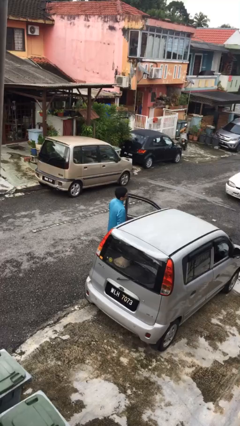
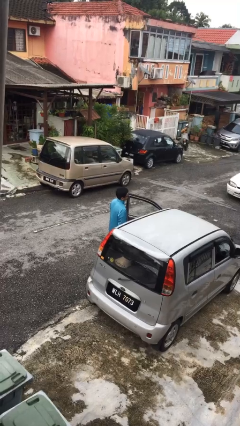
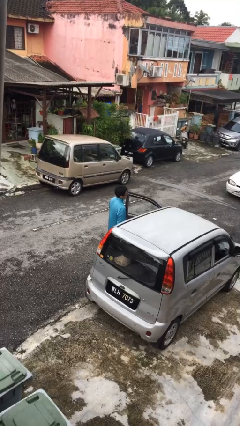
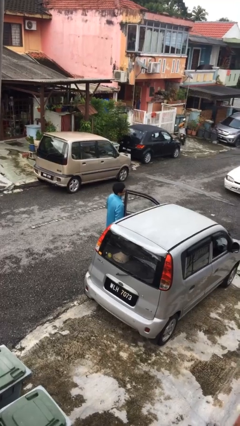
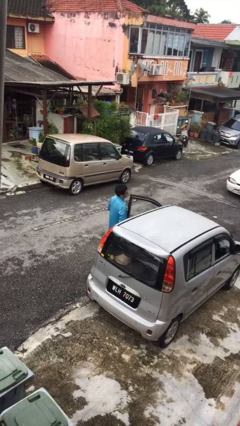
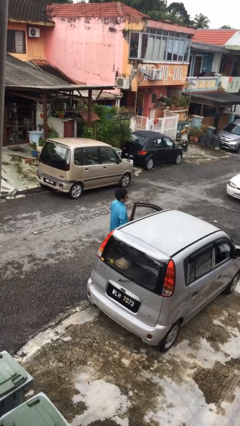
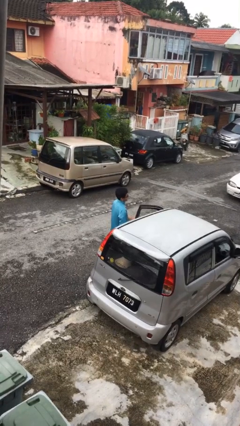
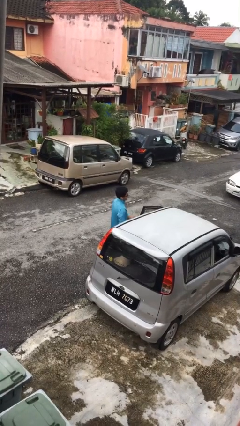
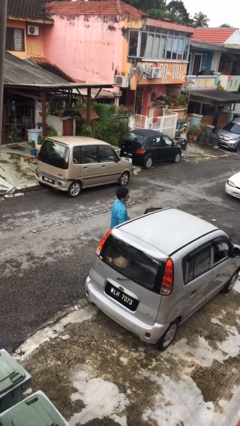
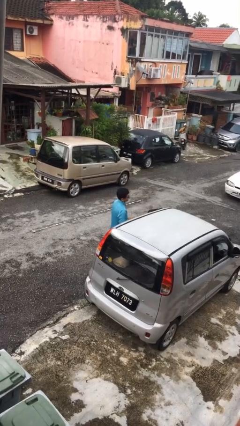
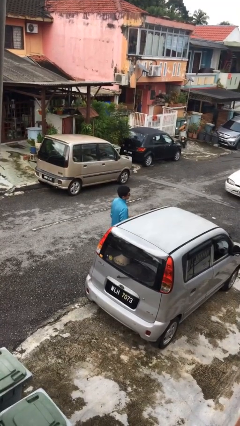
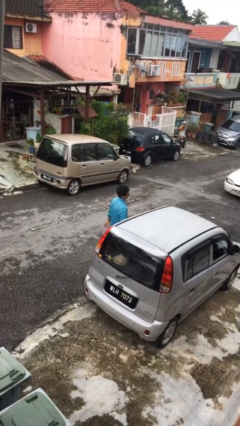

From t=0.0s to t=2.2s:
person closes car door

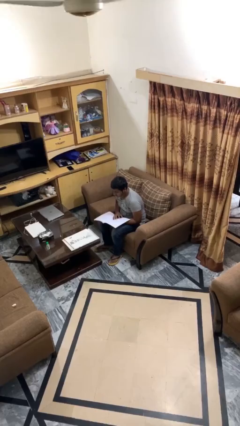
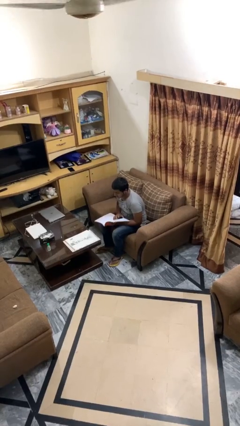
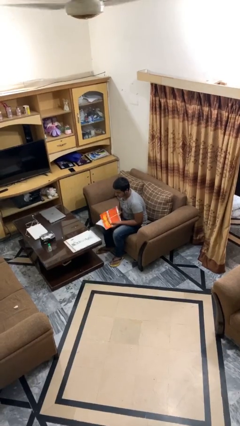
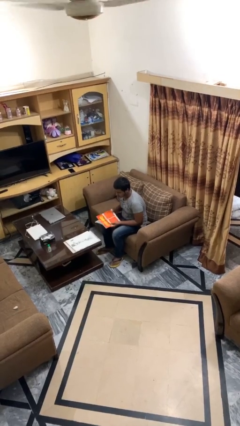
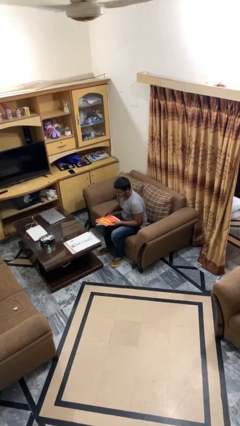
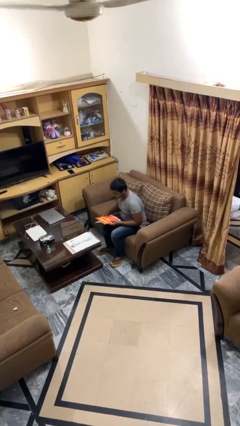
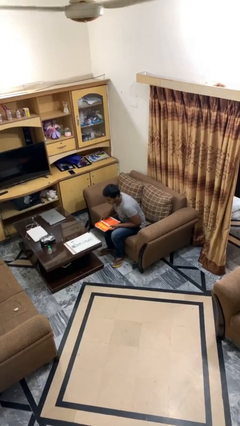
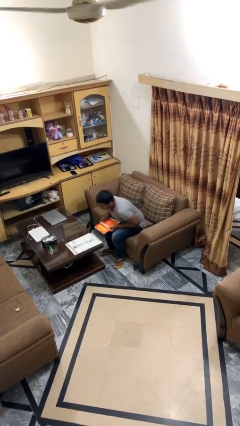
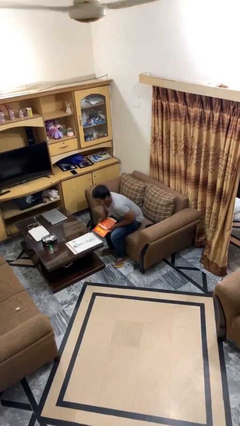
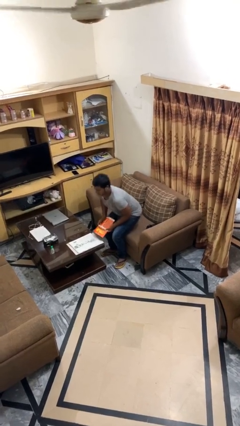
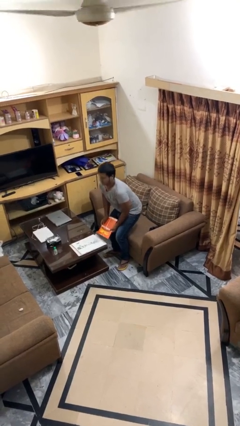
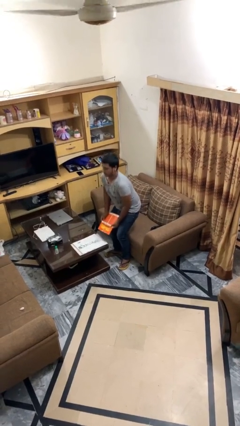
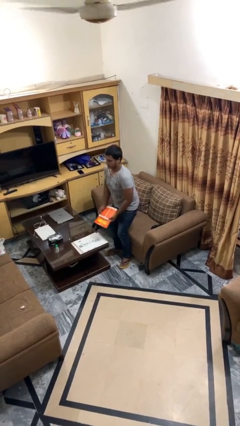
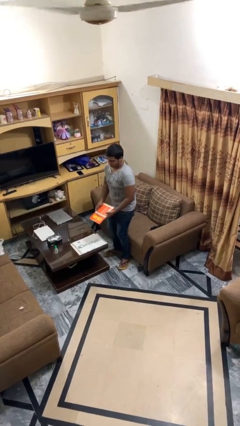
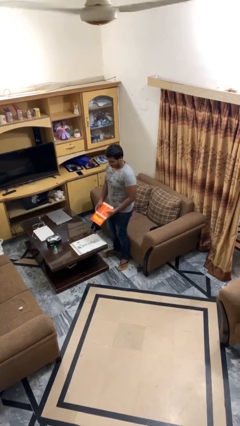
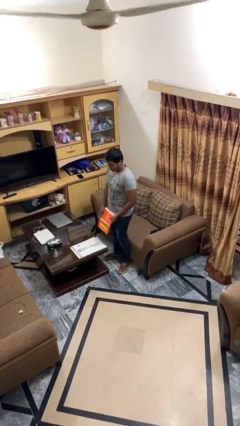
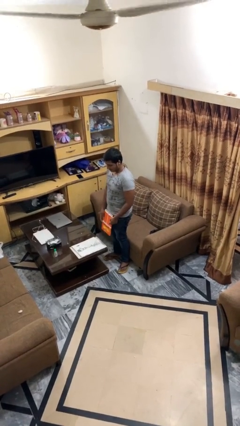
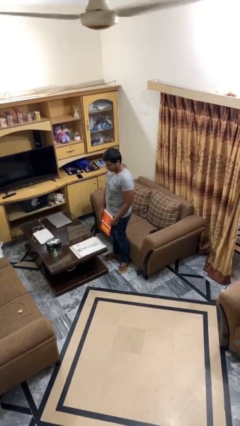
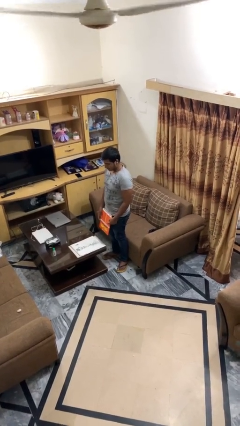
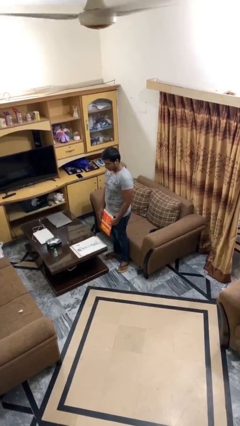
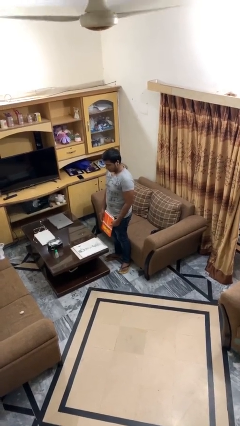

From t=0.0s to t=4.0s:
person stands up

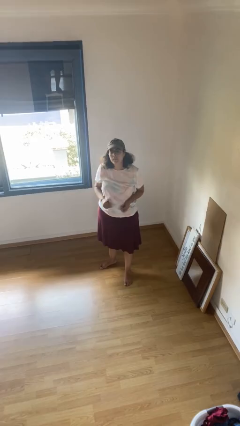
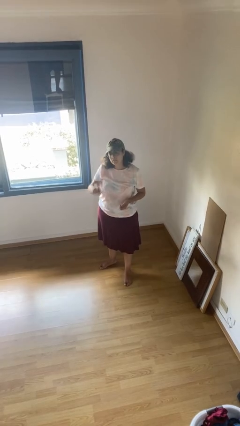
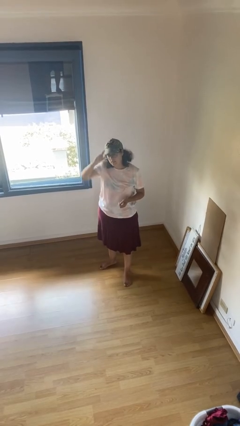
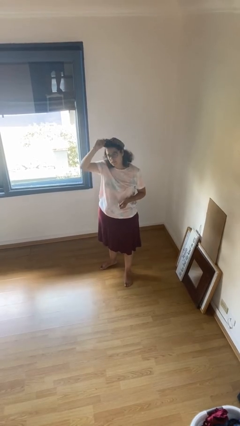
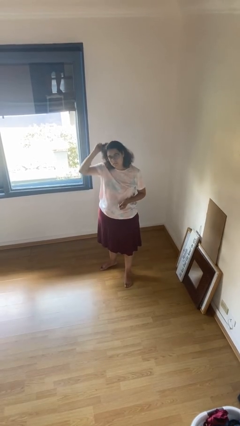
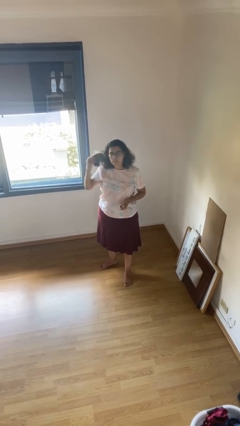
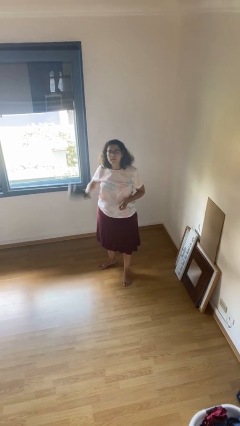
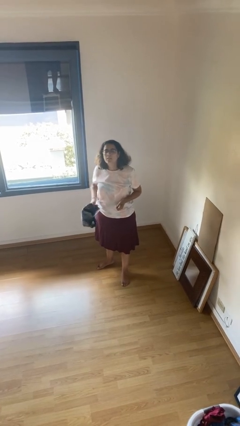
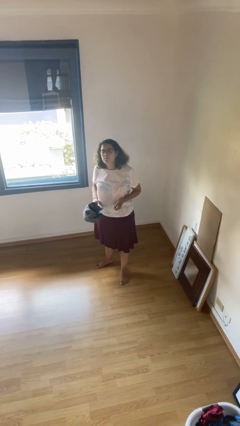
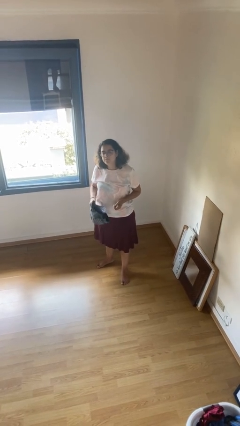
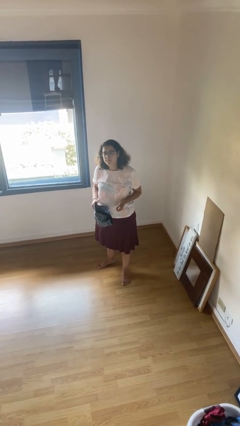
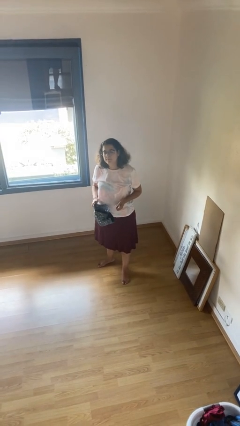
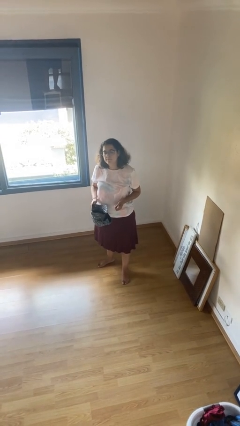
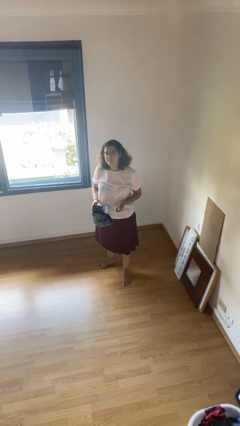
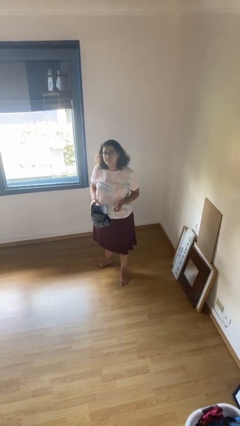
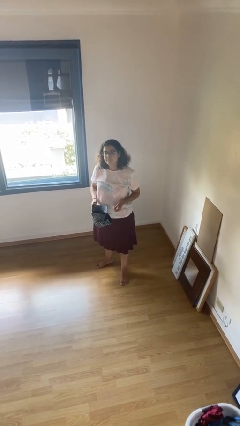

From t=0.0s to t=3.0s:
person takes off hat

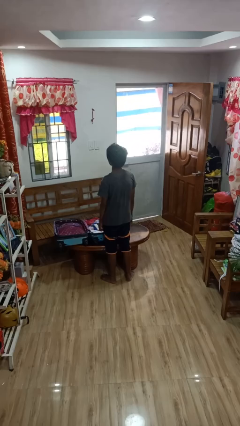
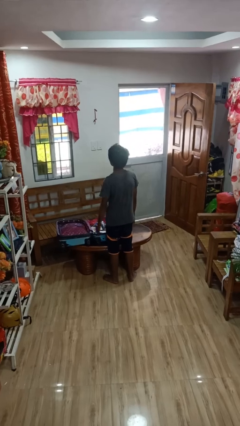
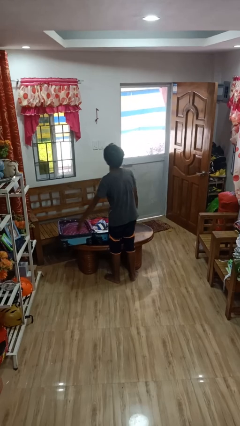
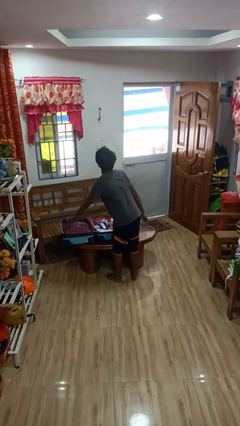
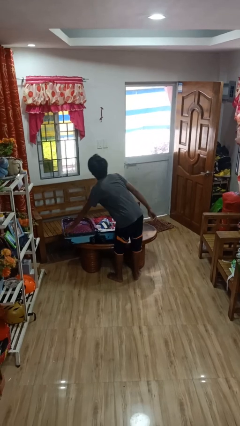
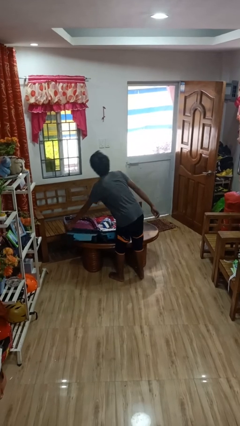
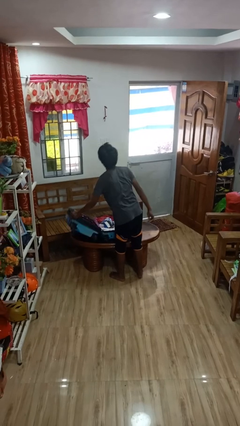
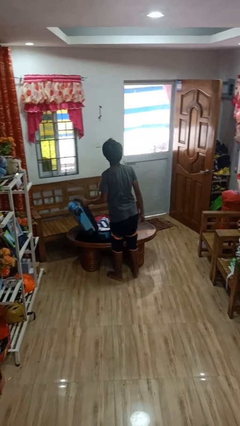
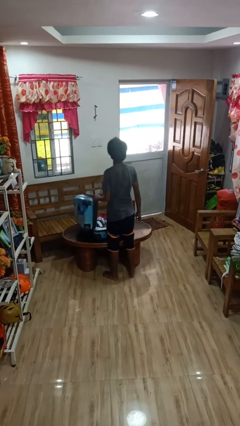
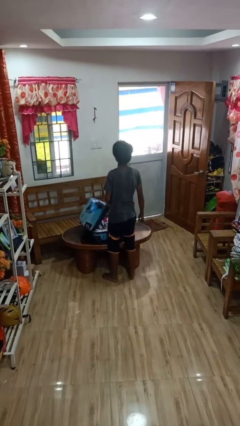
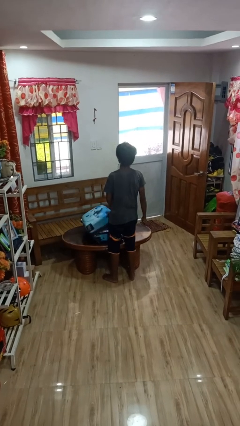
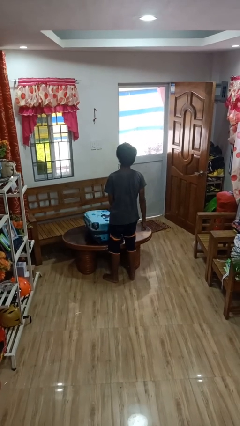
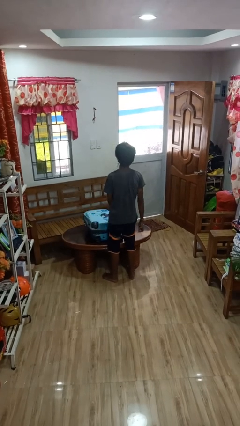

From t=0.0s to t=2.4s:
person closes suitcase

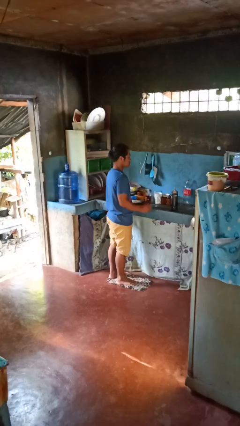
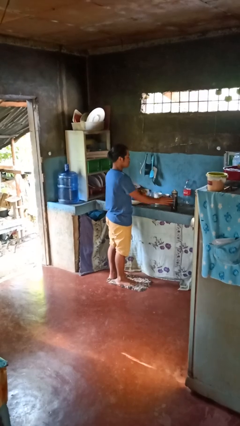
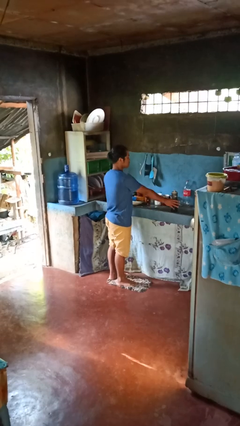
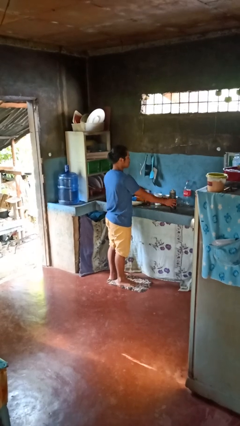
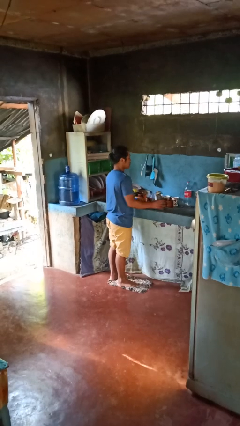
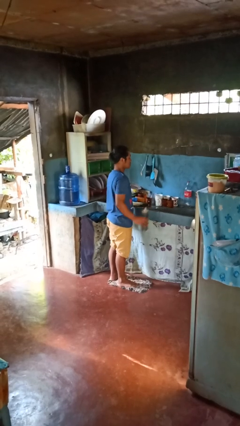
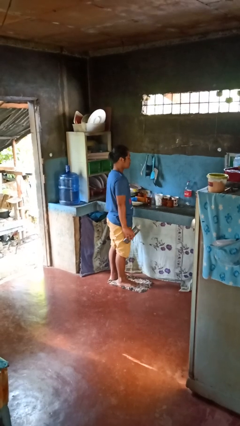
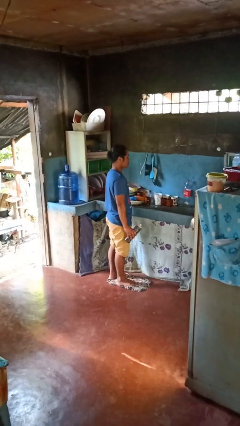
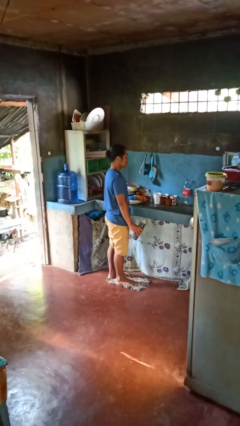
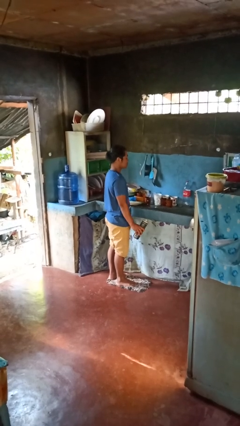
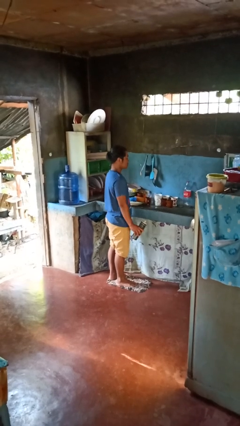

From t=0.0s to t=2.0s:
person picks up object from countertop

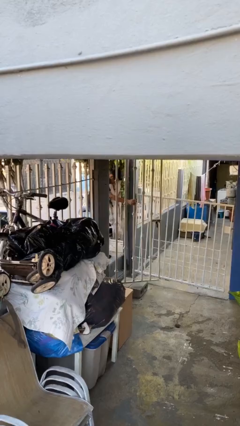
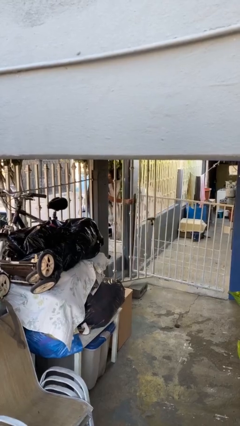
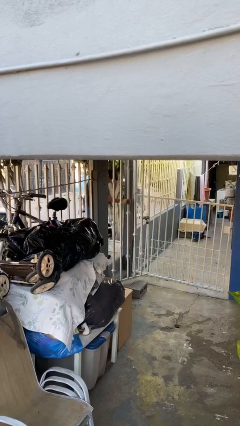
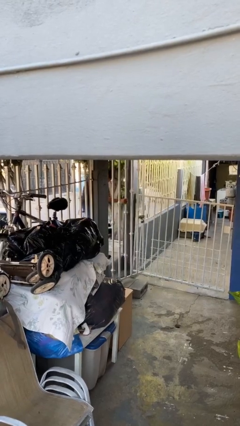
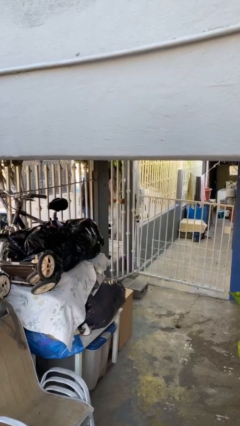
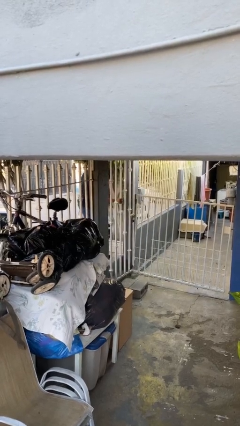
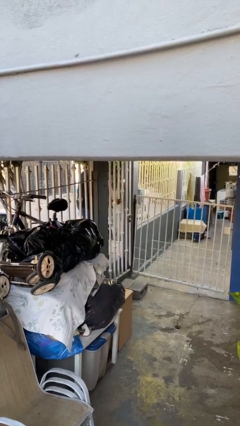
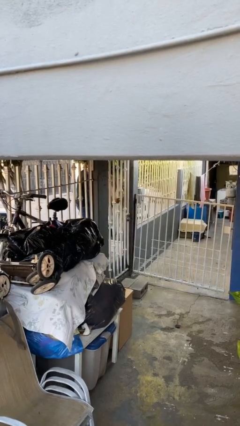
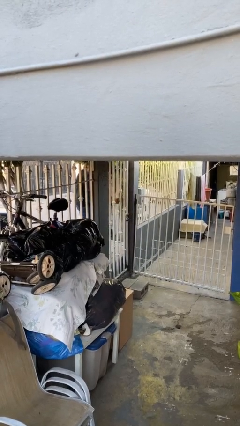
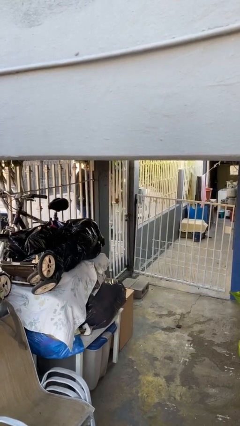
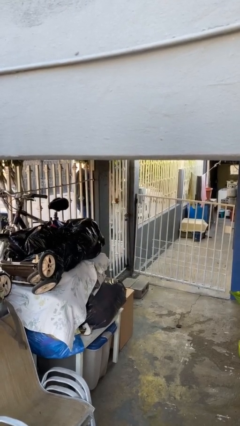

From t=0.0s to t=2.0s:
person closes facility door

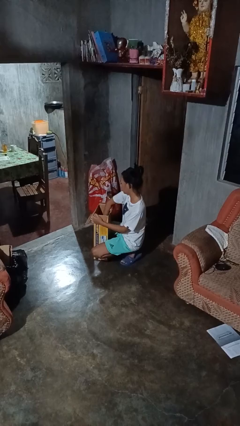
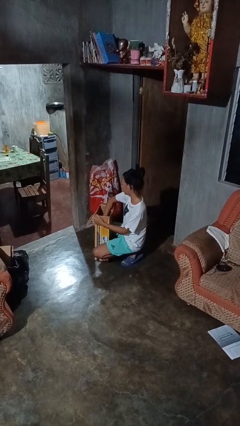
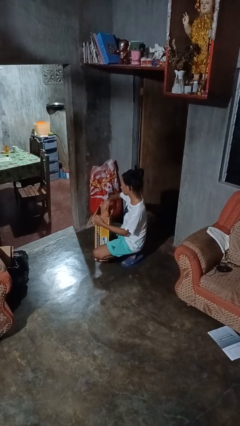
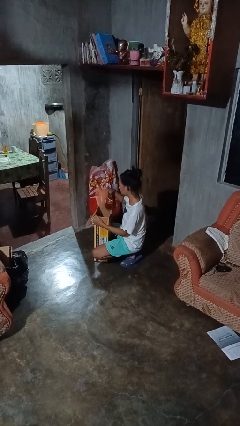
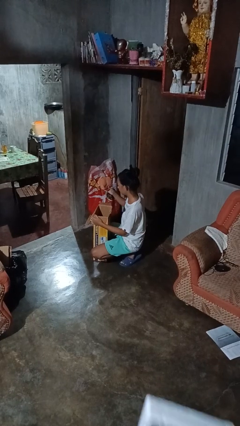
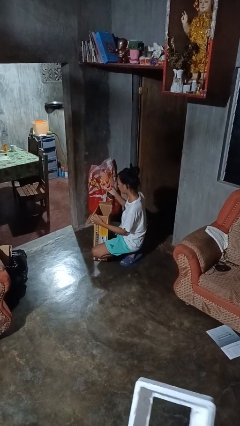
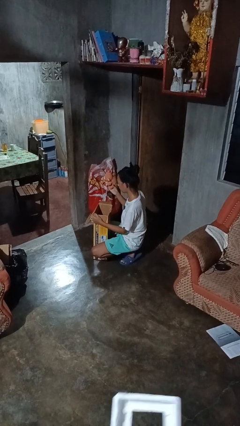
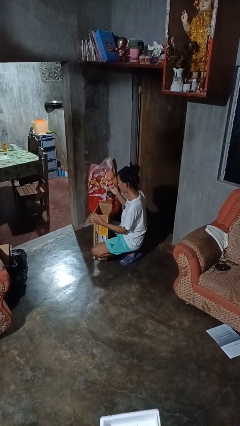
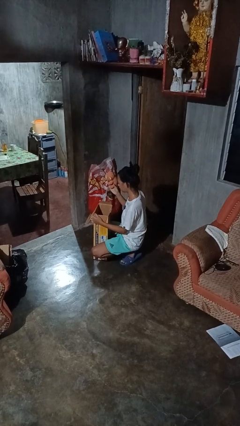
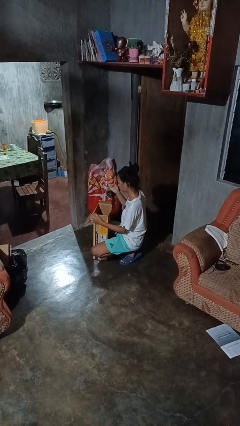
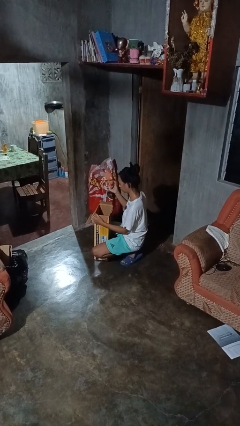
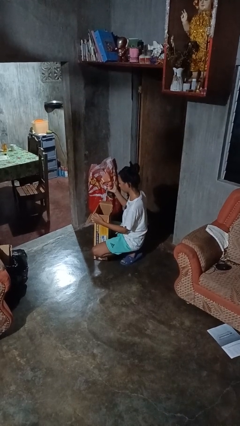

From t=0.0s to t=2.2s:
person takes object from box
